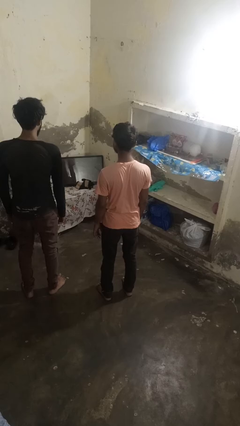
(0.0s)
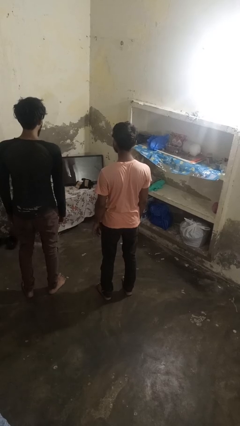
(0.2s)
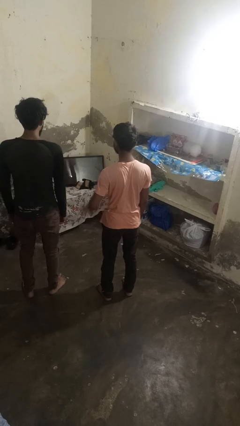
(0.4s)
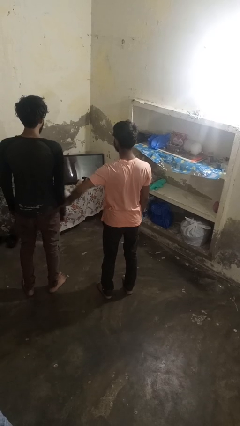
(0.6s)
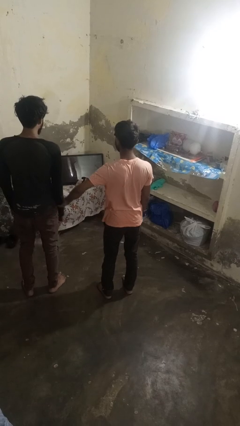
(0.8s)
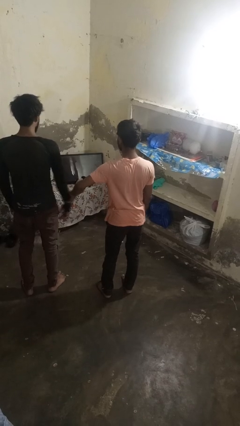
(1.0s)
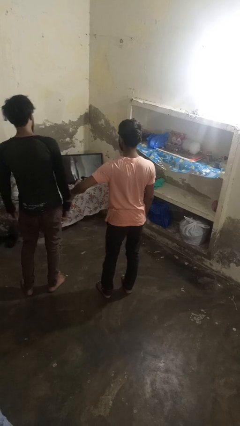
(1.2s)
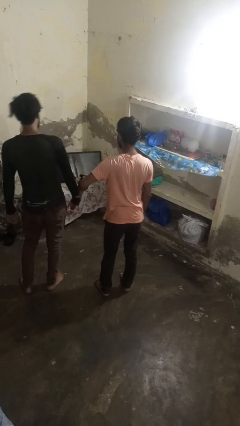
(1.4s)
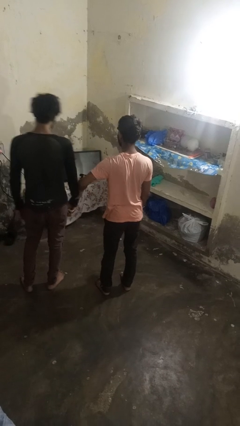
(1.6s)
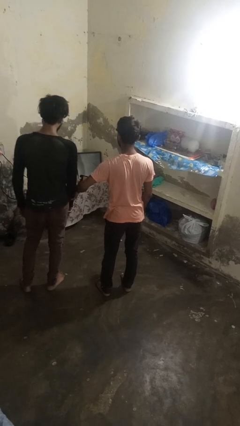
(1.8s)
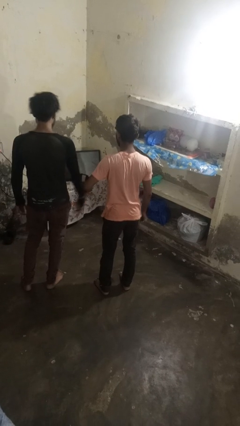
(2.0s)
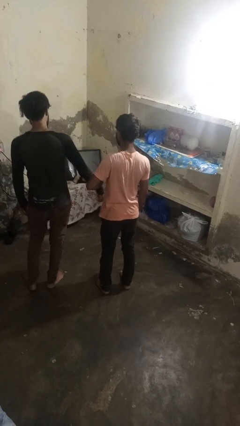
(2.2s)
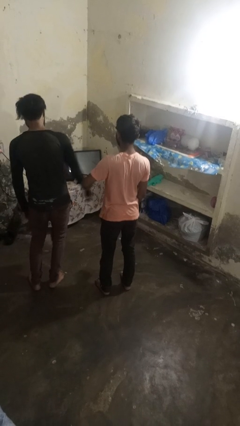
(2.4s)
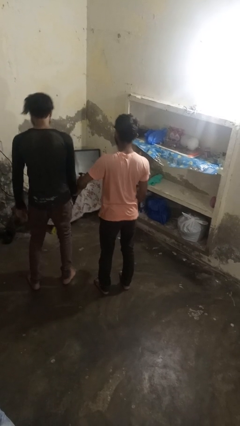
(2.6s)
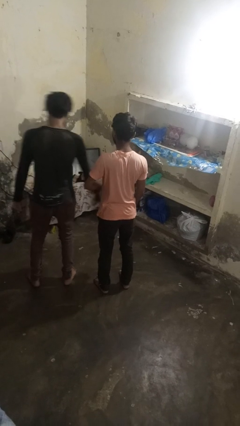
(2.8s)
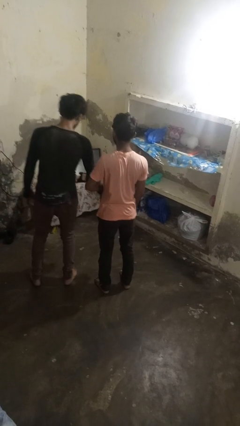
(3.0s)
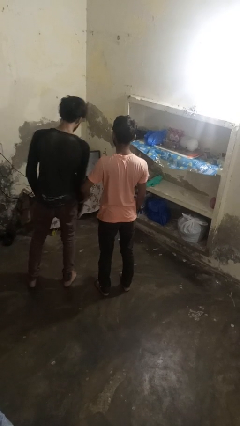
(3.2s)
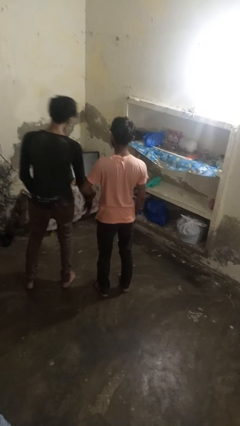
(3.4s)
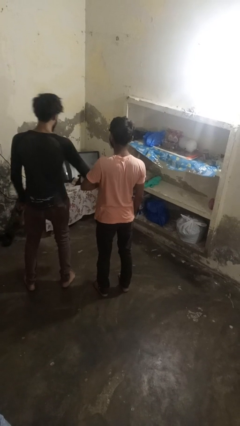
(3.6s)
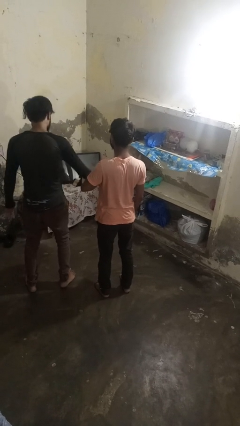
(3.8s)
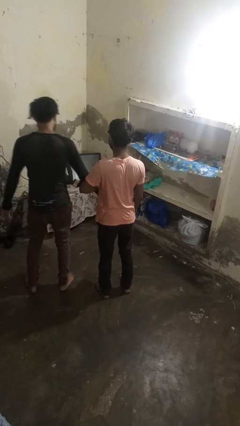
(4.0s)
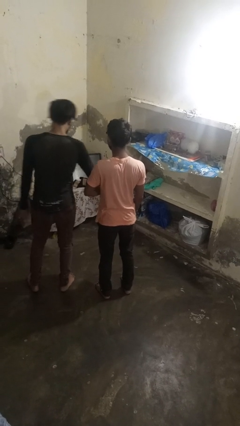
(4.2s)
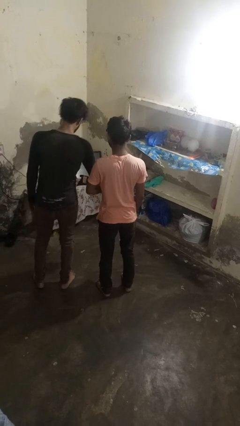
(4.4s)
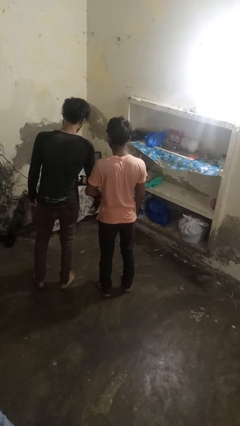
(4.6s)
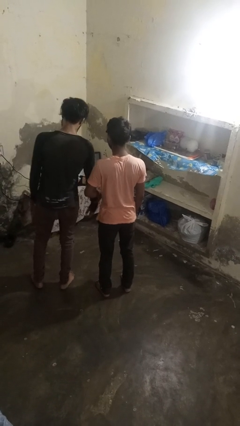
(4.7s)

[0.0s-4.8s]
person grabs person by forearm

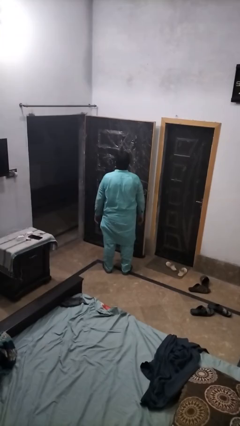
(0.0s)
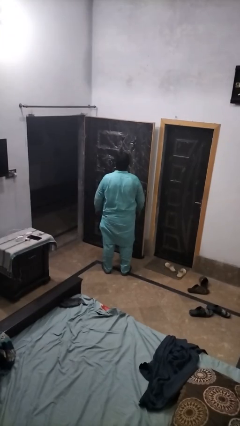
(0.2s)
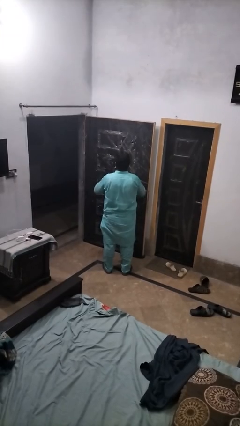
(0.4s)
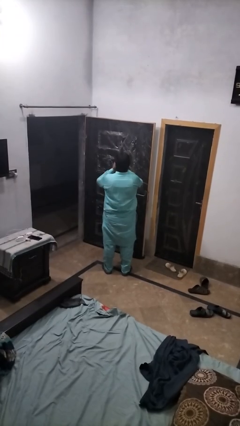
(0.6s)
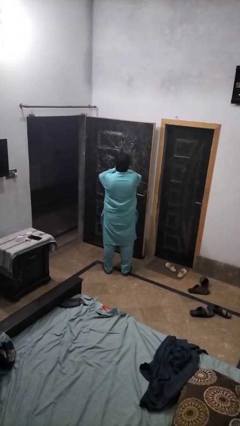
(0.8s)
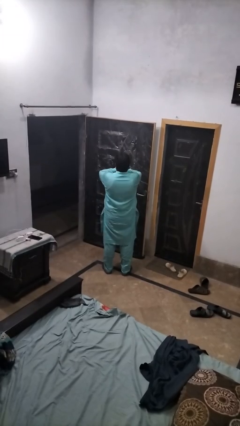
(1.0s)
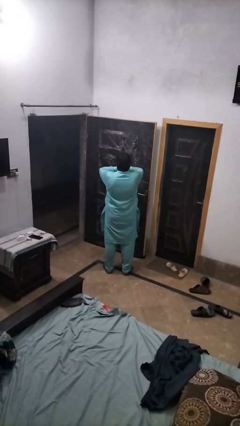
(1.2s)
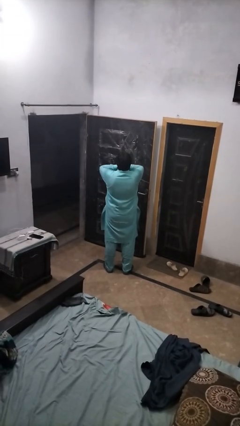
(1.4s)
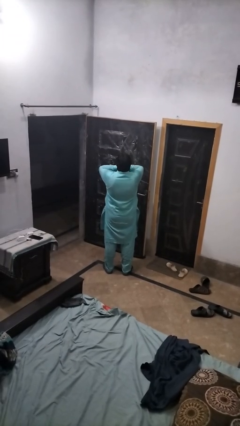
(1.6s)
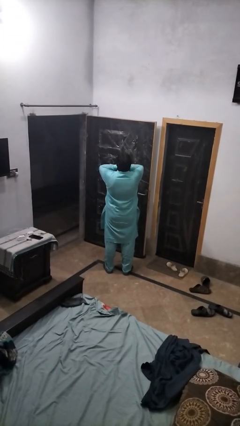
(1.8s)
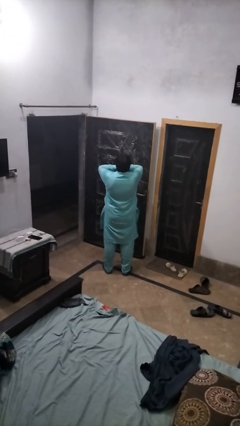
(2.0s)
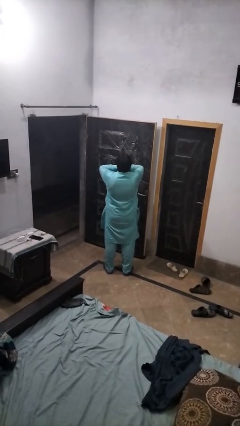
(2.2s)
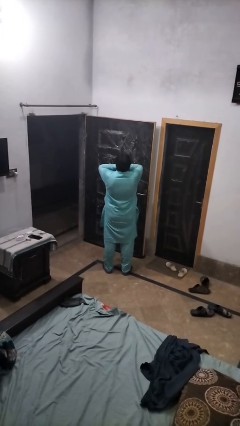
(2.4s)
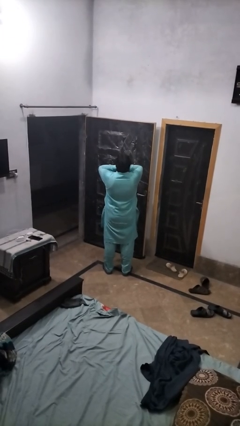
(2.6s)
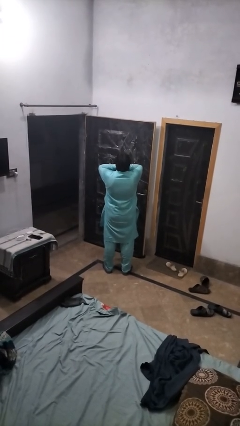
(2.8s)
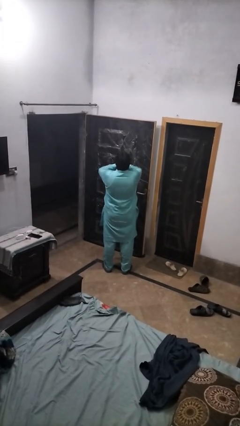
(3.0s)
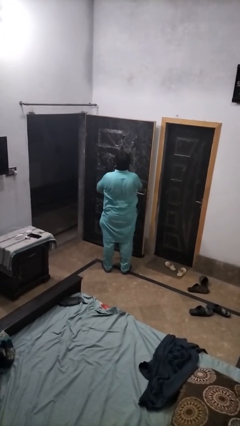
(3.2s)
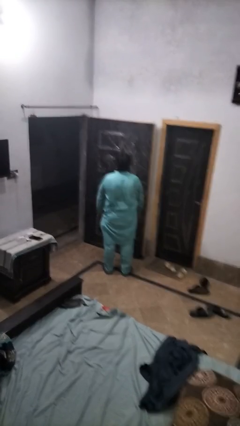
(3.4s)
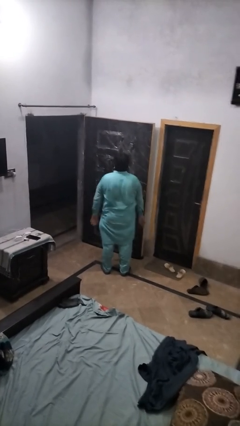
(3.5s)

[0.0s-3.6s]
person yawns

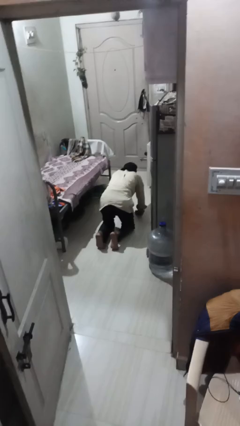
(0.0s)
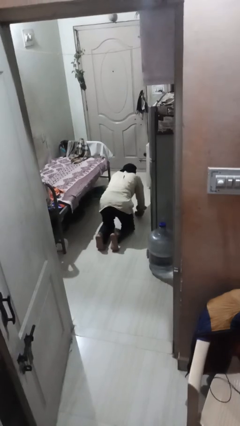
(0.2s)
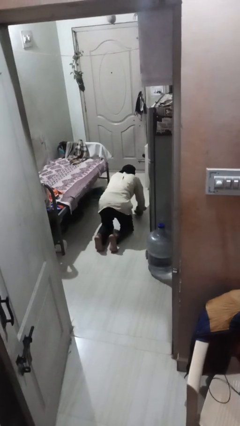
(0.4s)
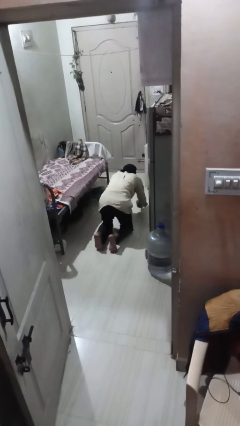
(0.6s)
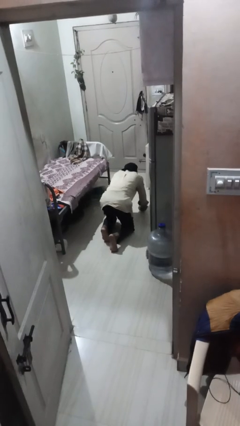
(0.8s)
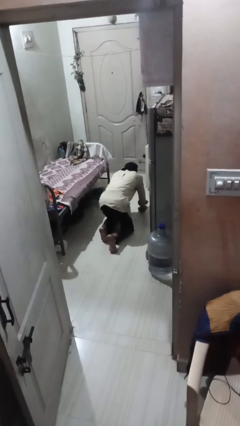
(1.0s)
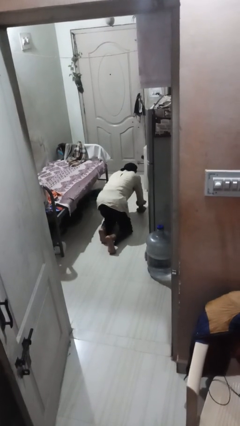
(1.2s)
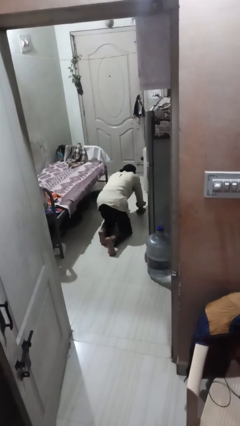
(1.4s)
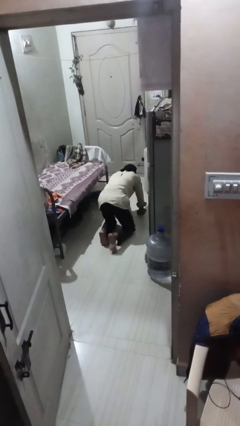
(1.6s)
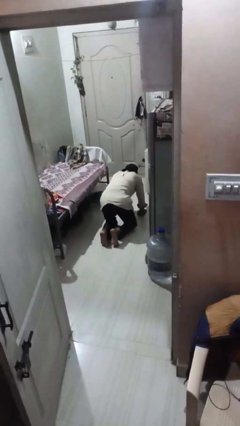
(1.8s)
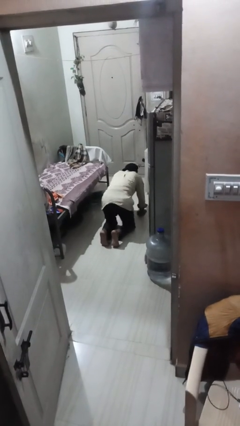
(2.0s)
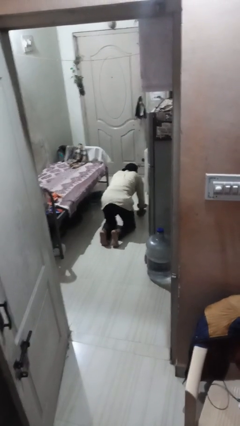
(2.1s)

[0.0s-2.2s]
person crawls

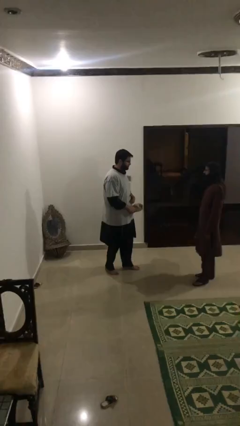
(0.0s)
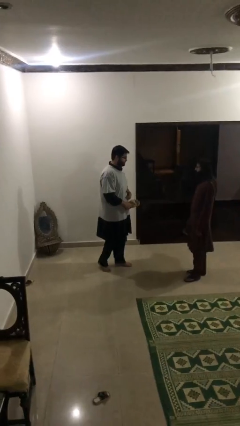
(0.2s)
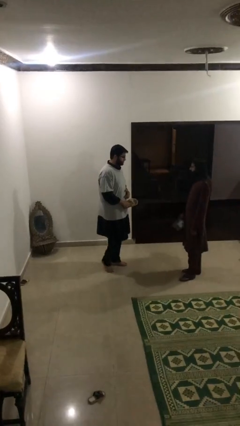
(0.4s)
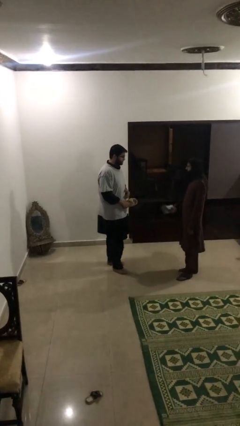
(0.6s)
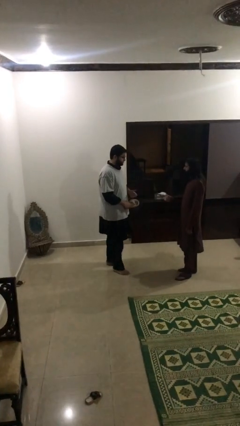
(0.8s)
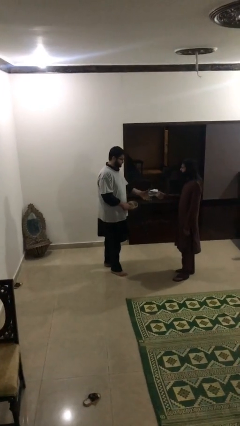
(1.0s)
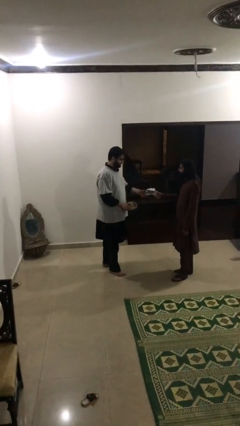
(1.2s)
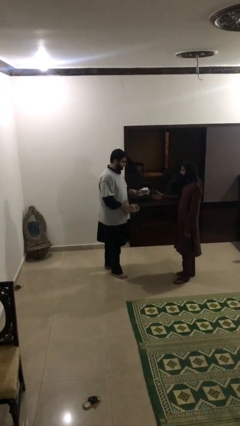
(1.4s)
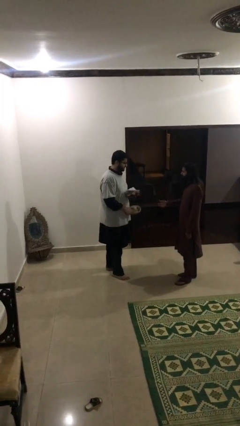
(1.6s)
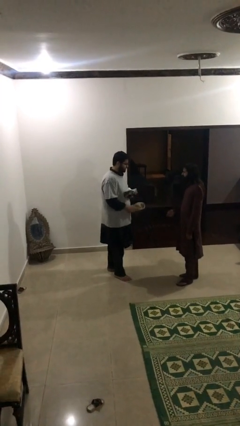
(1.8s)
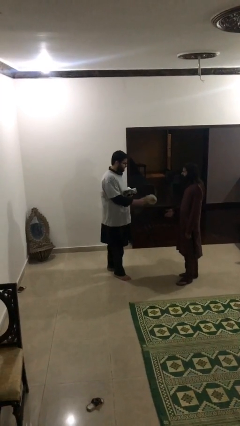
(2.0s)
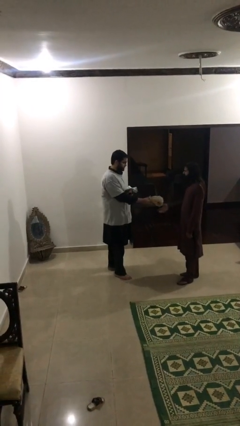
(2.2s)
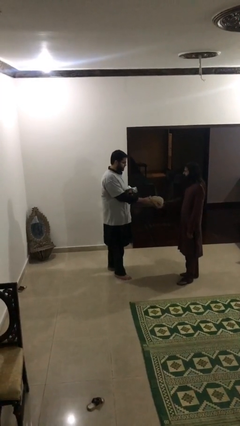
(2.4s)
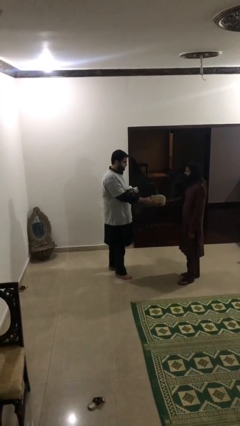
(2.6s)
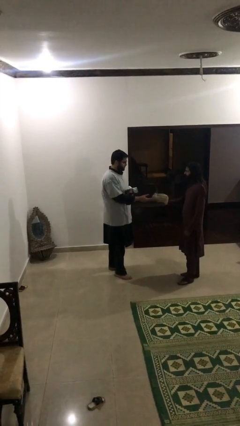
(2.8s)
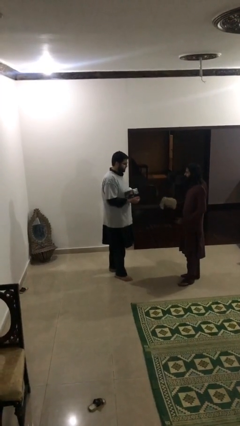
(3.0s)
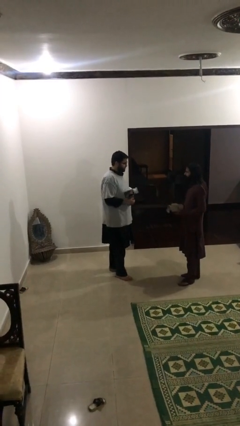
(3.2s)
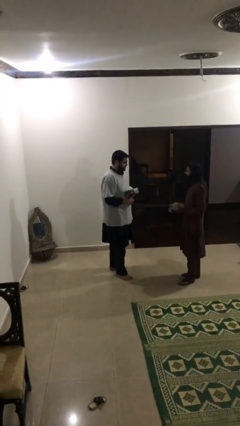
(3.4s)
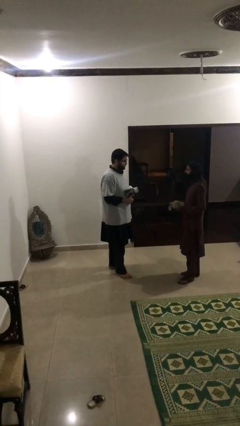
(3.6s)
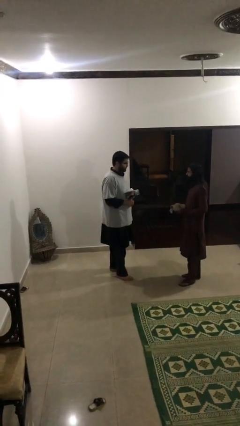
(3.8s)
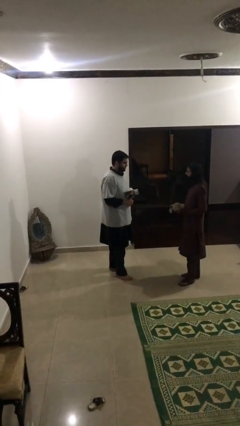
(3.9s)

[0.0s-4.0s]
person transfers object to person

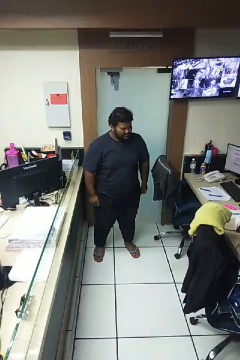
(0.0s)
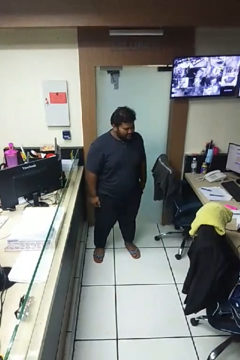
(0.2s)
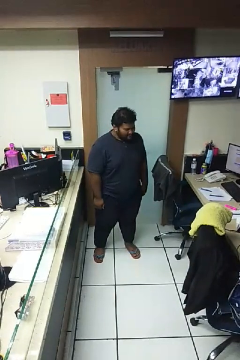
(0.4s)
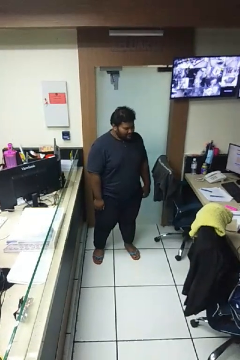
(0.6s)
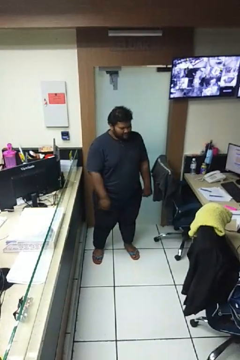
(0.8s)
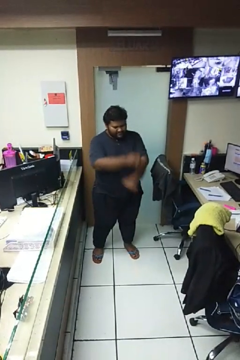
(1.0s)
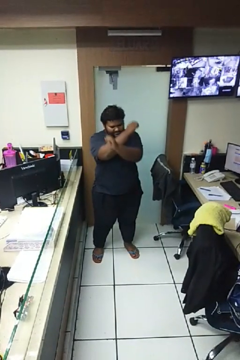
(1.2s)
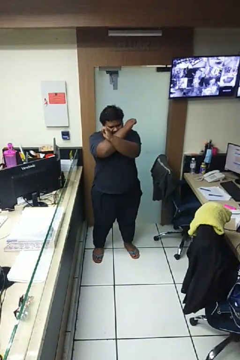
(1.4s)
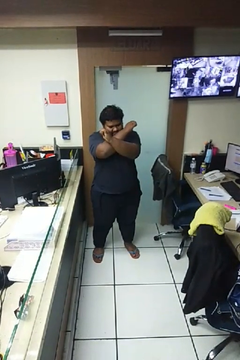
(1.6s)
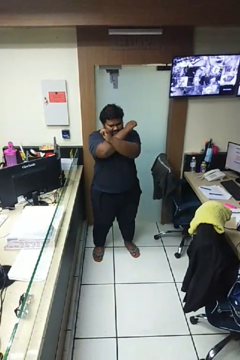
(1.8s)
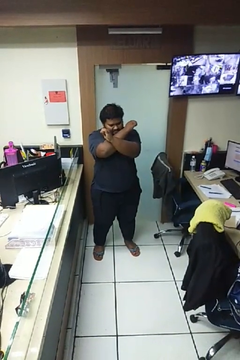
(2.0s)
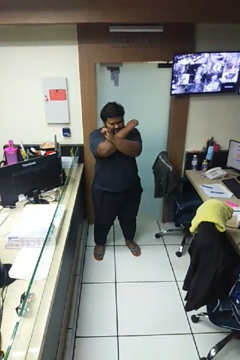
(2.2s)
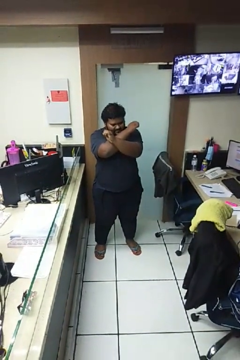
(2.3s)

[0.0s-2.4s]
person gestures arms x

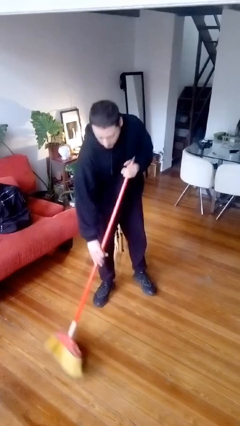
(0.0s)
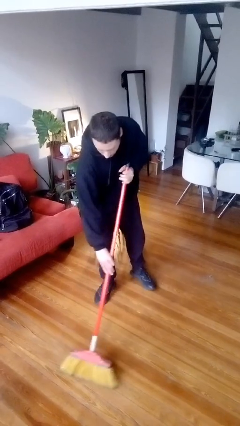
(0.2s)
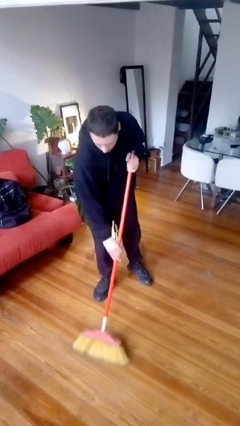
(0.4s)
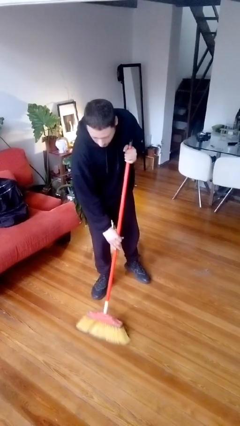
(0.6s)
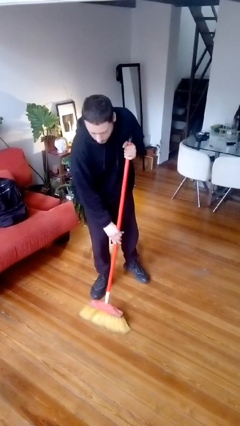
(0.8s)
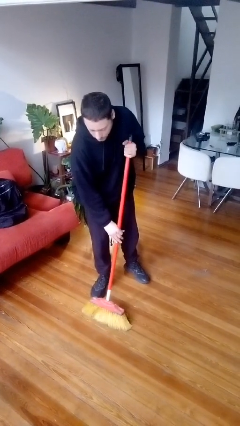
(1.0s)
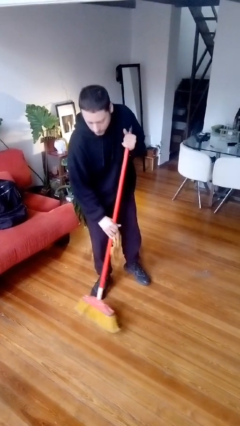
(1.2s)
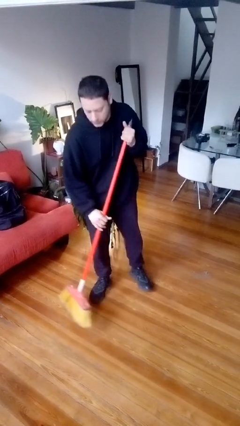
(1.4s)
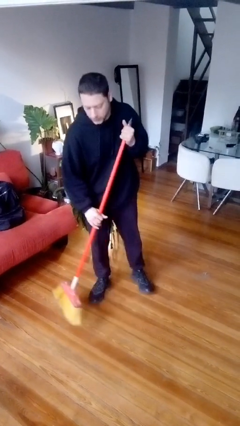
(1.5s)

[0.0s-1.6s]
person sweeps floor
